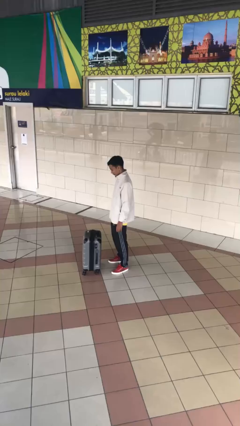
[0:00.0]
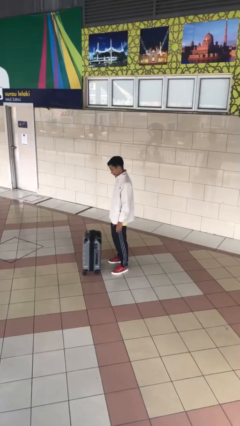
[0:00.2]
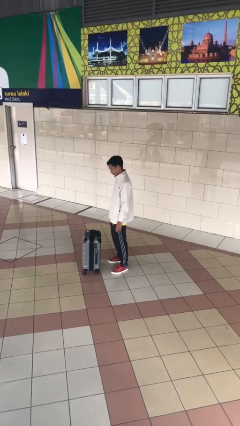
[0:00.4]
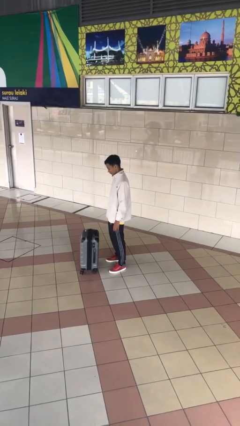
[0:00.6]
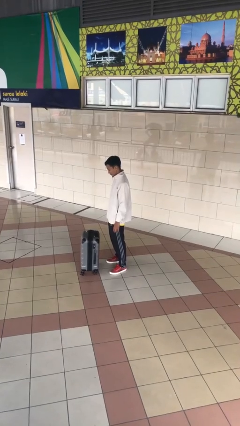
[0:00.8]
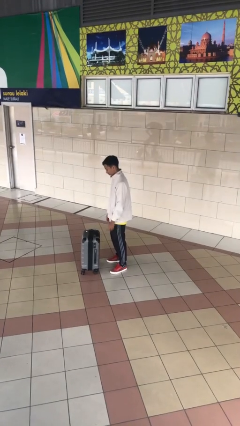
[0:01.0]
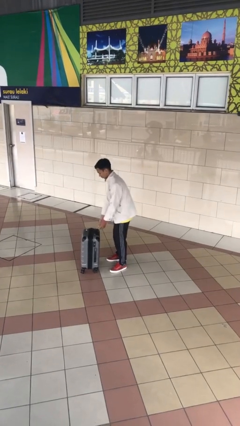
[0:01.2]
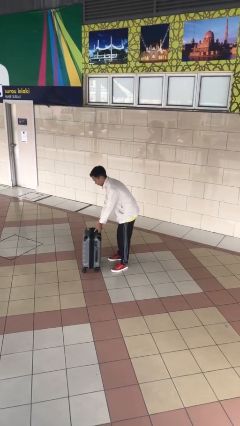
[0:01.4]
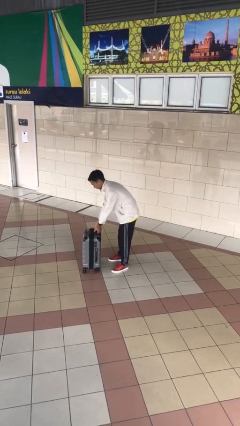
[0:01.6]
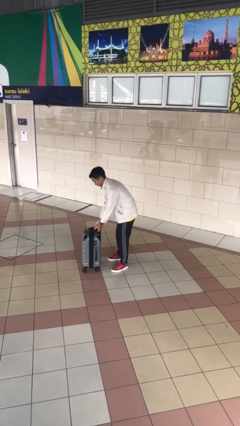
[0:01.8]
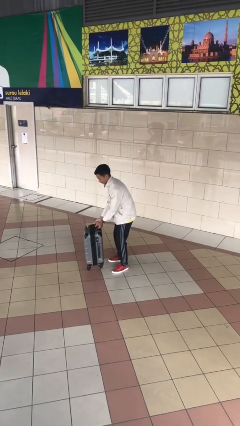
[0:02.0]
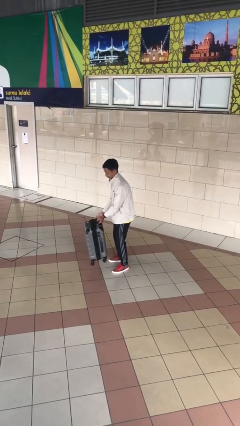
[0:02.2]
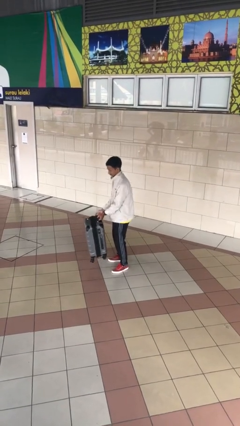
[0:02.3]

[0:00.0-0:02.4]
person picks up object from floor

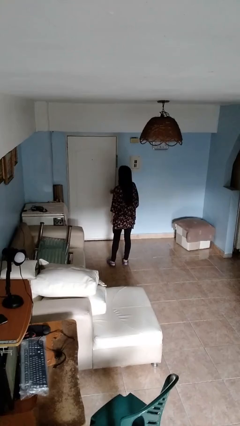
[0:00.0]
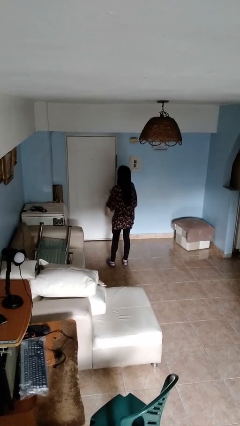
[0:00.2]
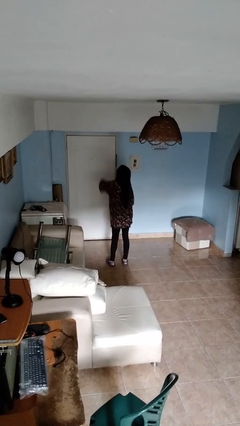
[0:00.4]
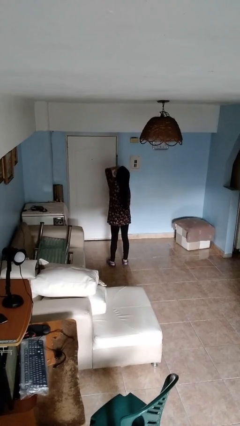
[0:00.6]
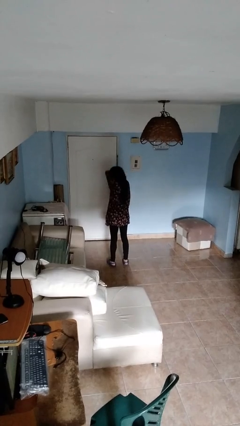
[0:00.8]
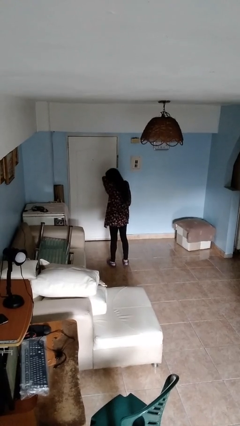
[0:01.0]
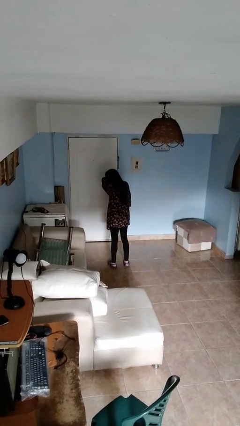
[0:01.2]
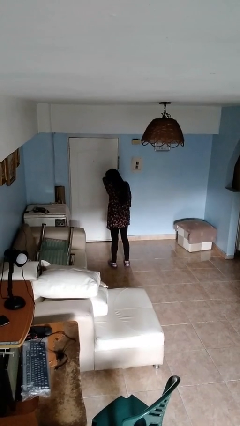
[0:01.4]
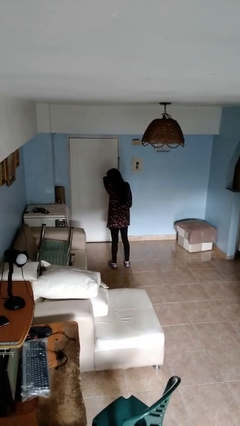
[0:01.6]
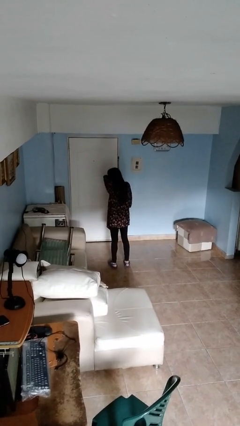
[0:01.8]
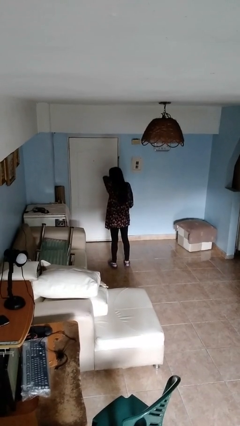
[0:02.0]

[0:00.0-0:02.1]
person sneezes into arm

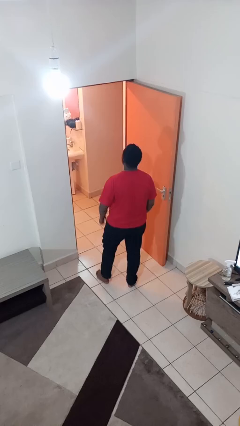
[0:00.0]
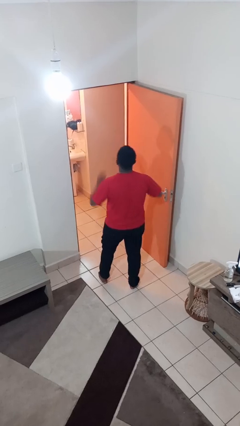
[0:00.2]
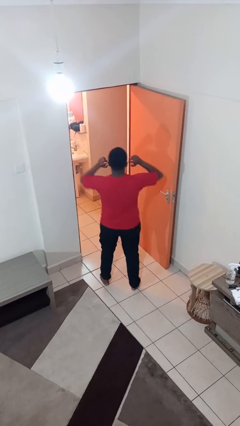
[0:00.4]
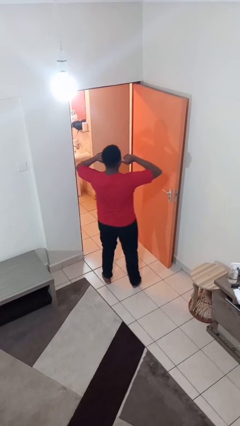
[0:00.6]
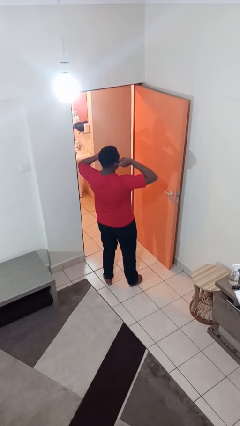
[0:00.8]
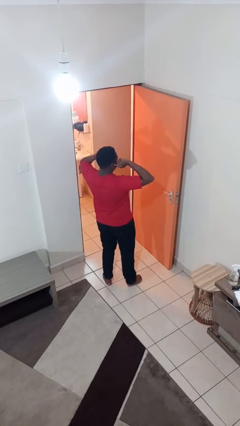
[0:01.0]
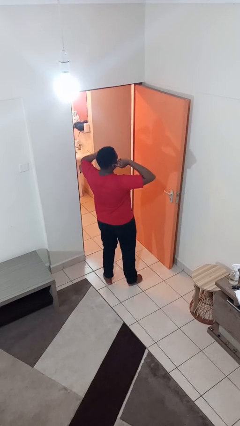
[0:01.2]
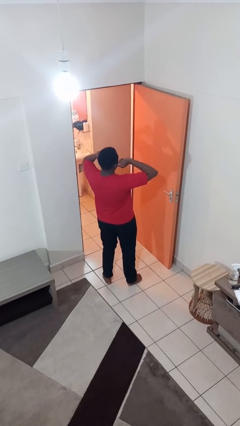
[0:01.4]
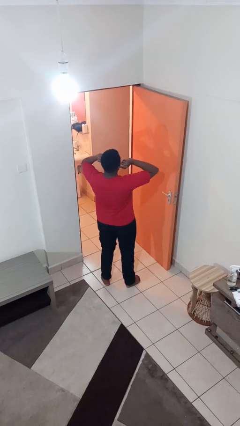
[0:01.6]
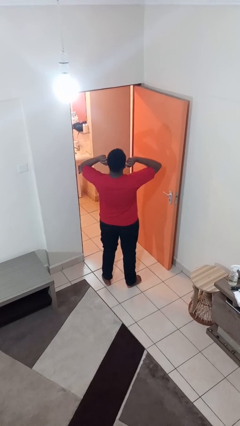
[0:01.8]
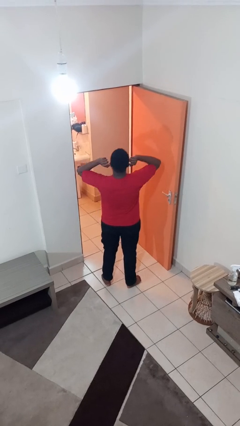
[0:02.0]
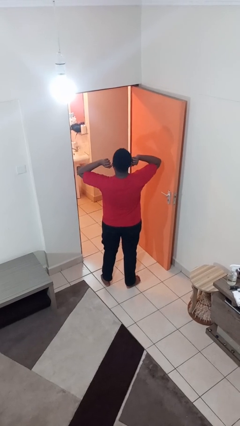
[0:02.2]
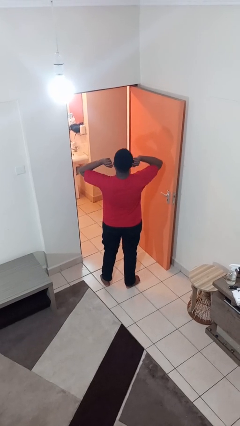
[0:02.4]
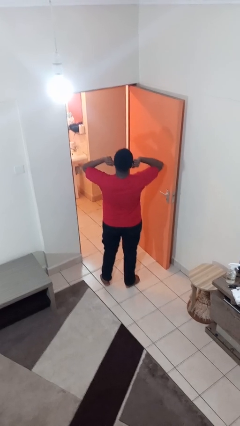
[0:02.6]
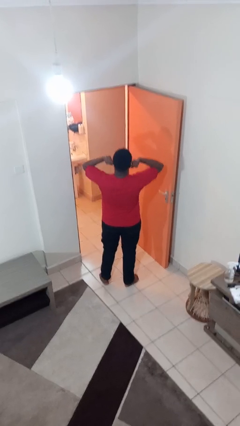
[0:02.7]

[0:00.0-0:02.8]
person puts fingers in ear

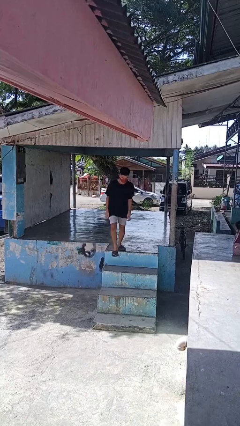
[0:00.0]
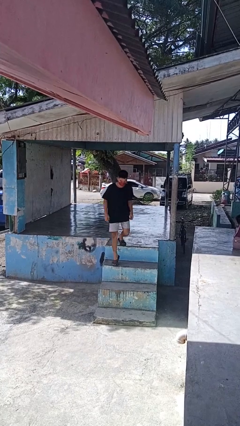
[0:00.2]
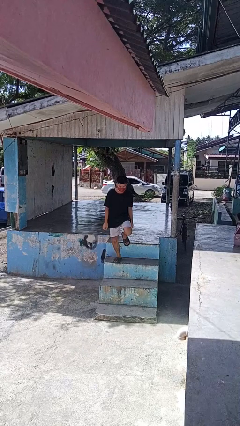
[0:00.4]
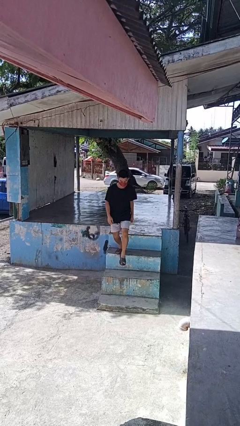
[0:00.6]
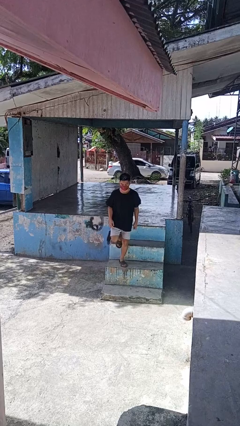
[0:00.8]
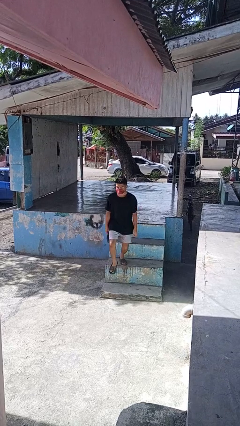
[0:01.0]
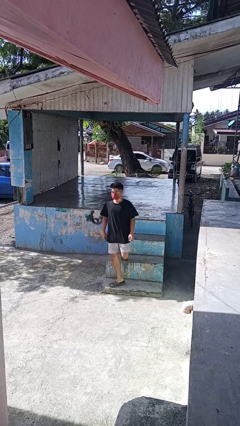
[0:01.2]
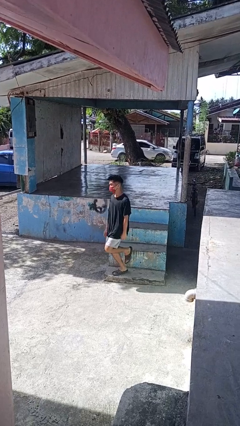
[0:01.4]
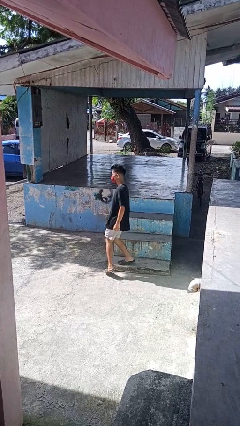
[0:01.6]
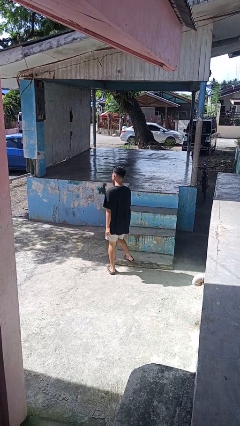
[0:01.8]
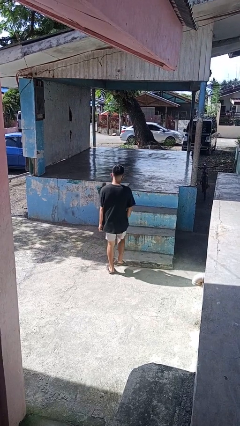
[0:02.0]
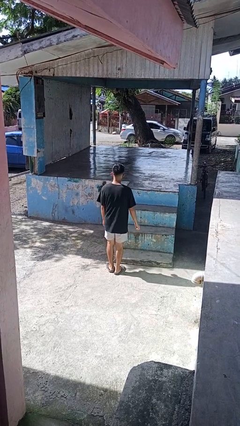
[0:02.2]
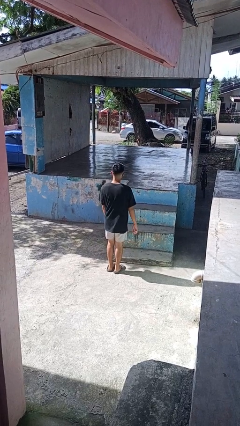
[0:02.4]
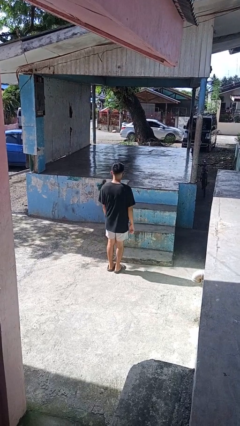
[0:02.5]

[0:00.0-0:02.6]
person climbs down stairs

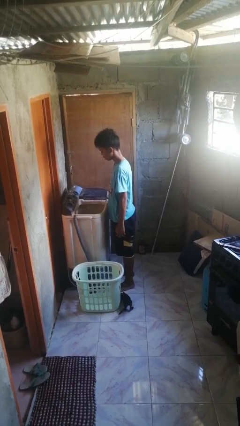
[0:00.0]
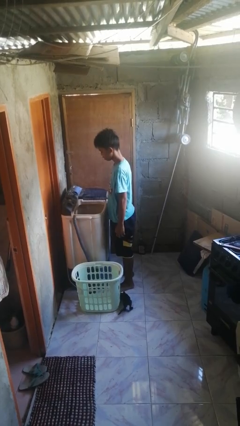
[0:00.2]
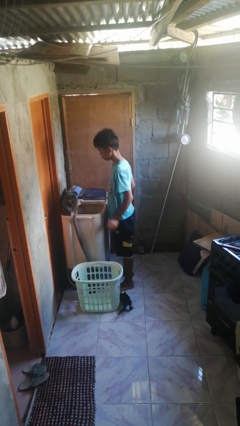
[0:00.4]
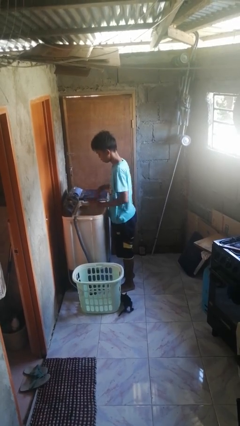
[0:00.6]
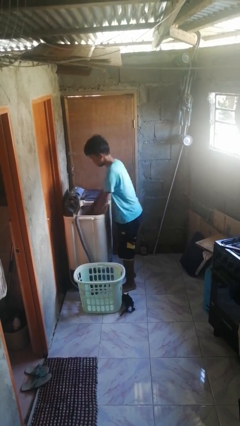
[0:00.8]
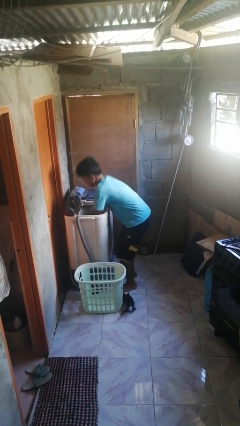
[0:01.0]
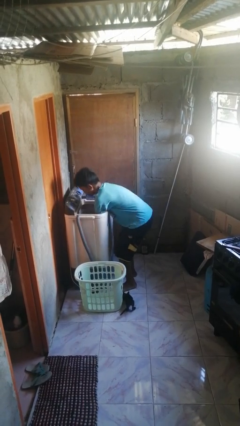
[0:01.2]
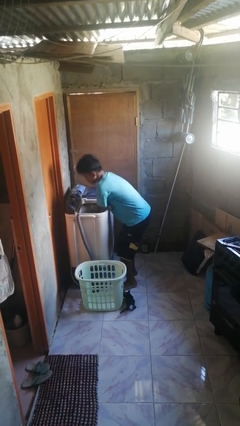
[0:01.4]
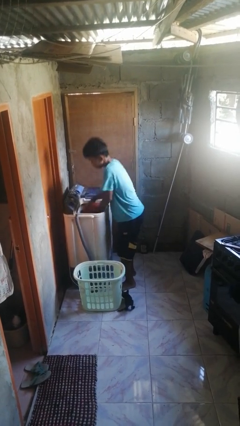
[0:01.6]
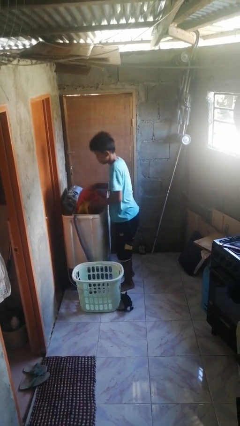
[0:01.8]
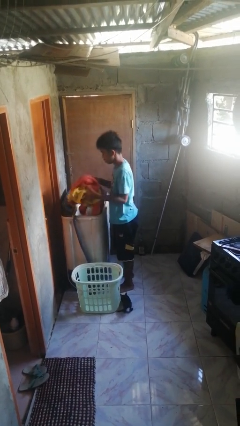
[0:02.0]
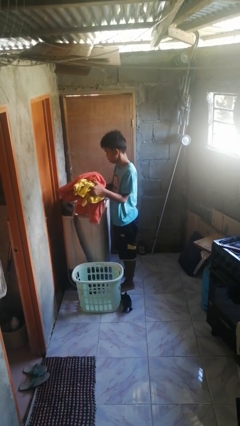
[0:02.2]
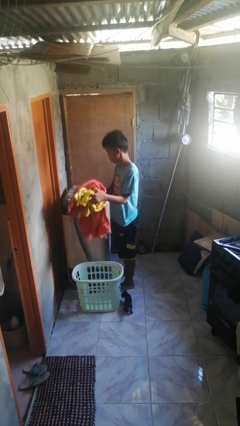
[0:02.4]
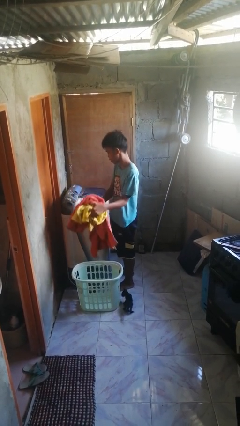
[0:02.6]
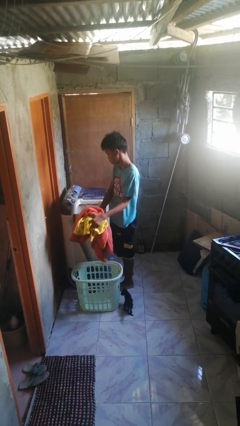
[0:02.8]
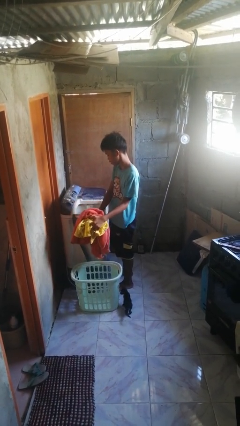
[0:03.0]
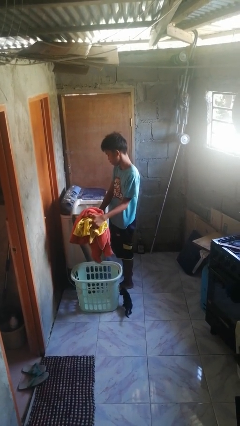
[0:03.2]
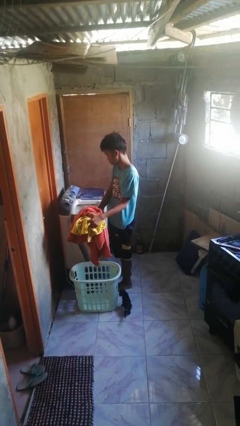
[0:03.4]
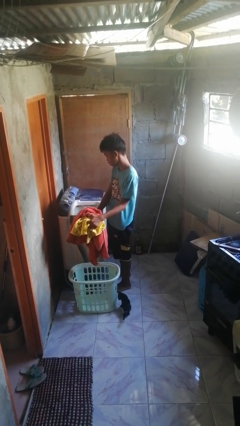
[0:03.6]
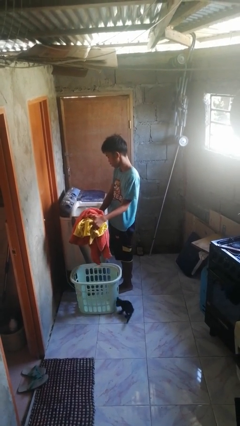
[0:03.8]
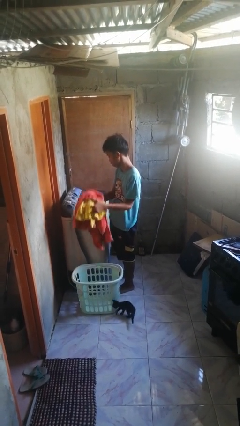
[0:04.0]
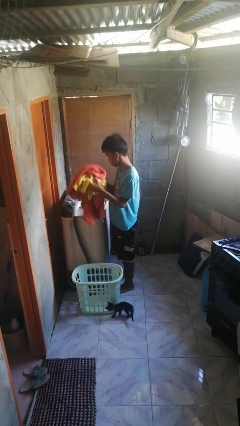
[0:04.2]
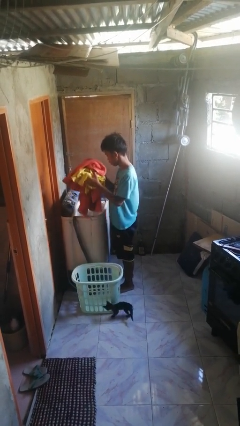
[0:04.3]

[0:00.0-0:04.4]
person unloads clotheswasher

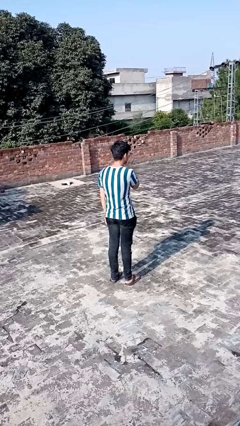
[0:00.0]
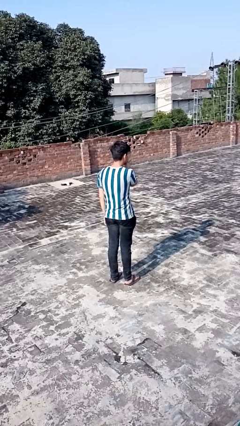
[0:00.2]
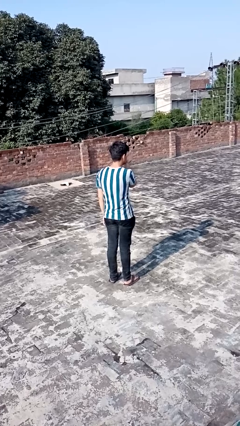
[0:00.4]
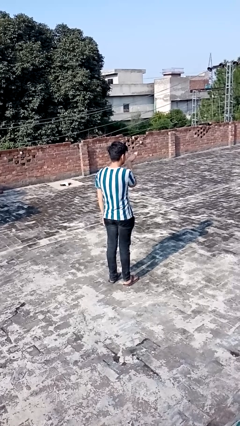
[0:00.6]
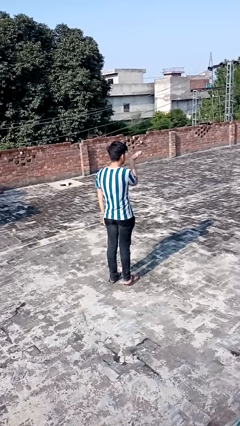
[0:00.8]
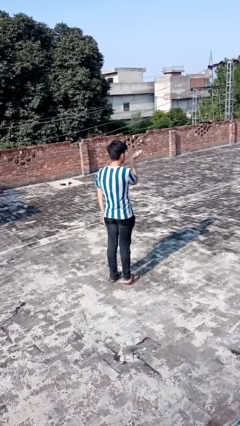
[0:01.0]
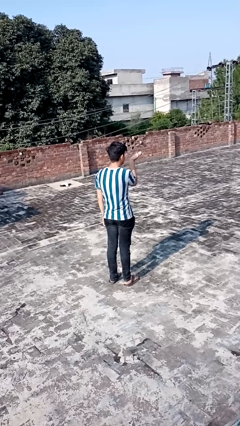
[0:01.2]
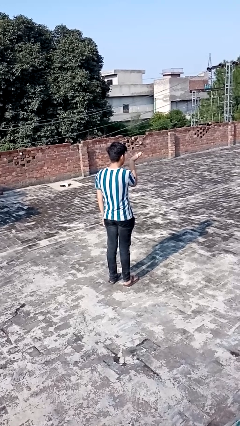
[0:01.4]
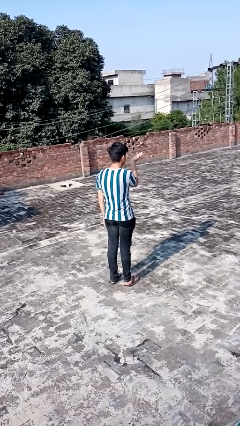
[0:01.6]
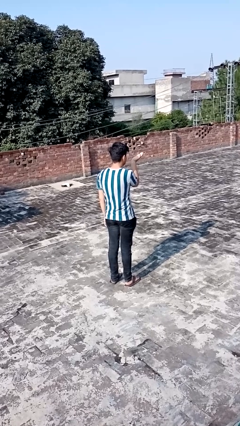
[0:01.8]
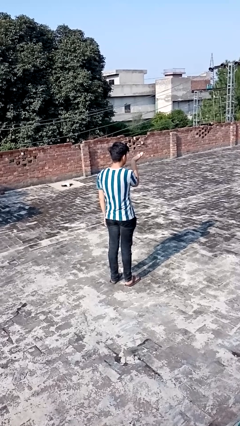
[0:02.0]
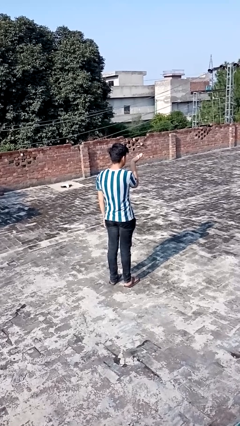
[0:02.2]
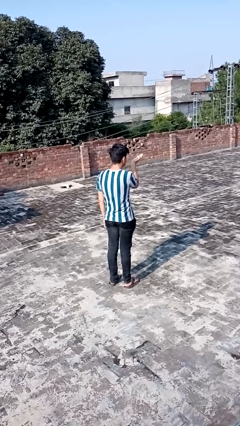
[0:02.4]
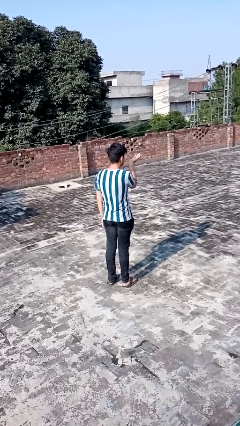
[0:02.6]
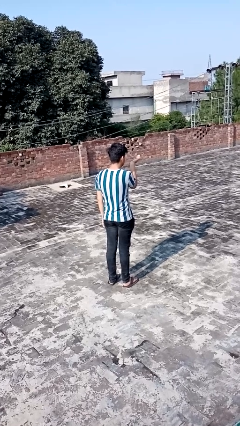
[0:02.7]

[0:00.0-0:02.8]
person gestures blow kiss

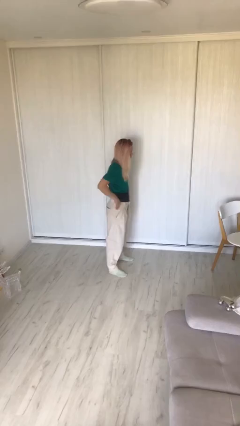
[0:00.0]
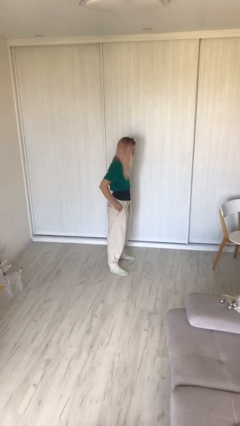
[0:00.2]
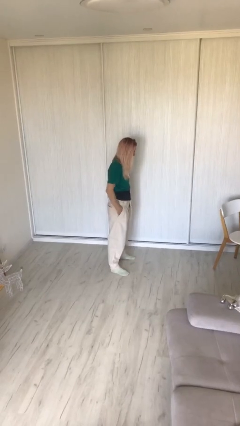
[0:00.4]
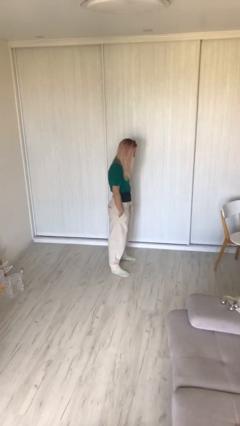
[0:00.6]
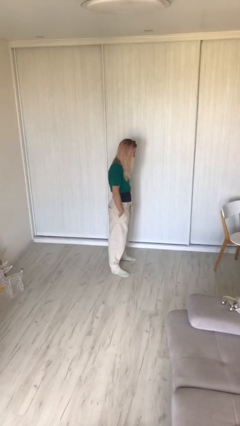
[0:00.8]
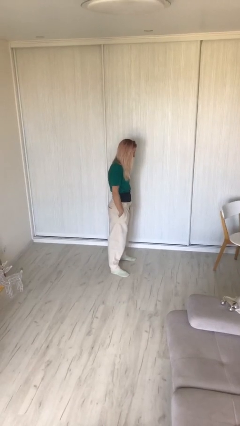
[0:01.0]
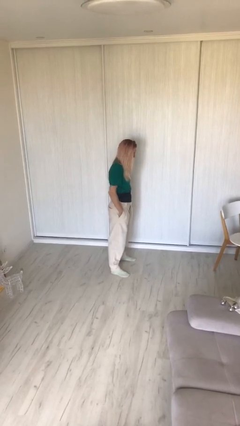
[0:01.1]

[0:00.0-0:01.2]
person puts hands in back pockets
